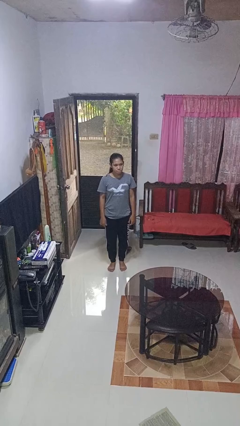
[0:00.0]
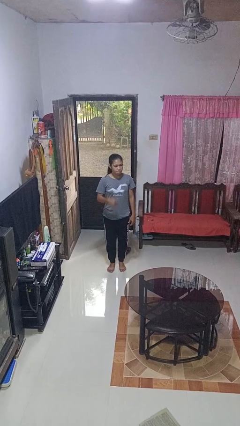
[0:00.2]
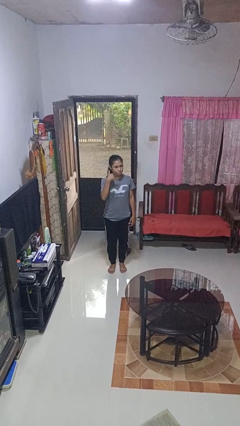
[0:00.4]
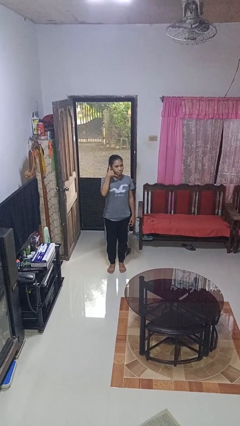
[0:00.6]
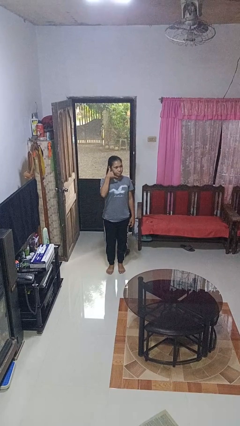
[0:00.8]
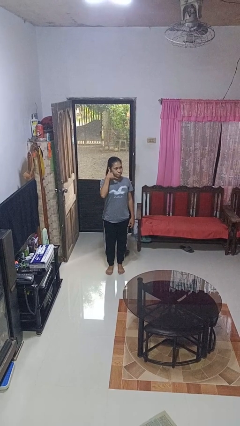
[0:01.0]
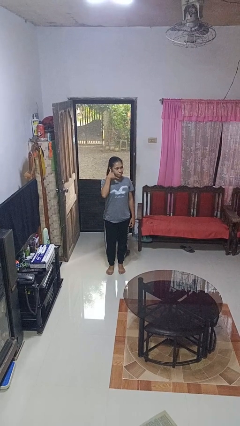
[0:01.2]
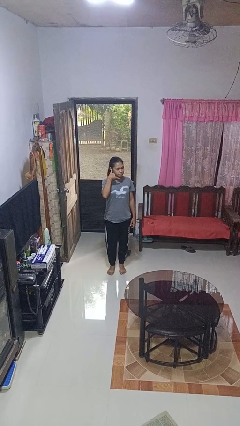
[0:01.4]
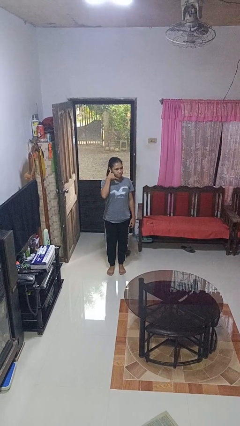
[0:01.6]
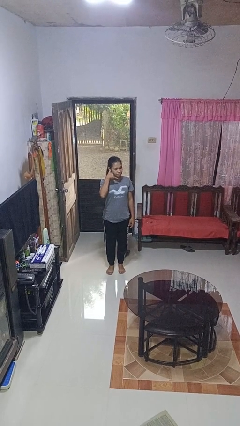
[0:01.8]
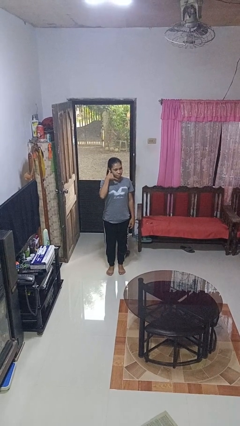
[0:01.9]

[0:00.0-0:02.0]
person gestures call me

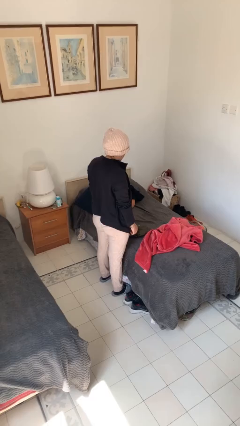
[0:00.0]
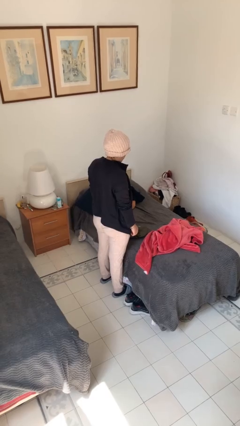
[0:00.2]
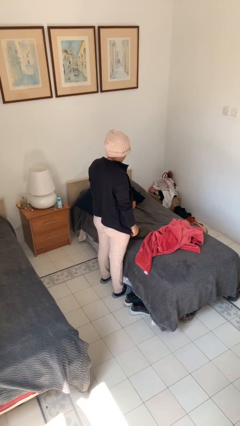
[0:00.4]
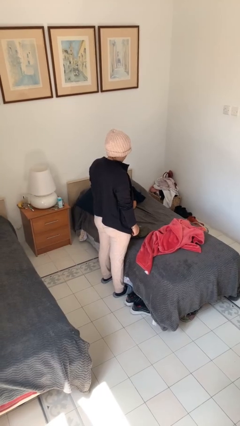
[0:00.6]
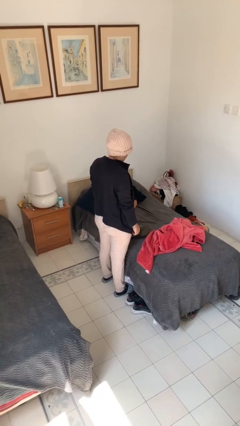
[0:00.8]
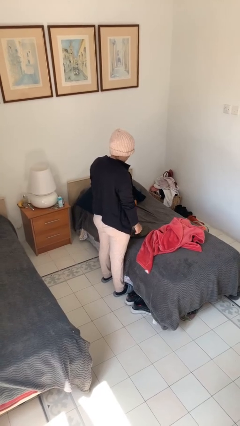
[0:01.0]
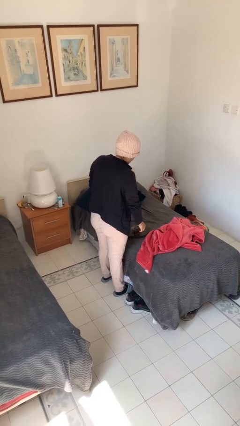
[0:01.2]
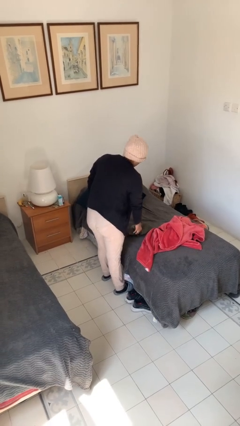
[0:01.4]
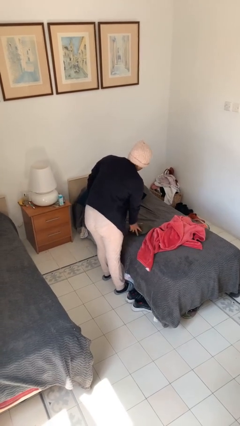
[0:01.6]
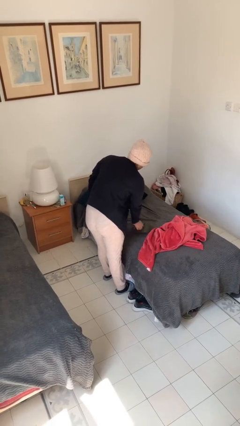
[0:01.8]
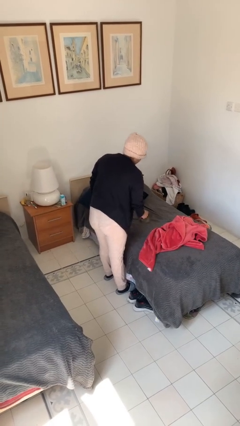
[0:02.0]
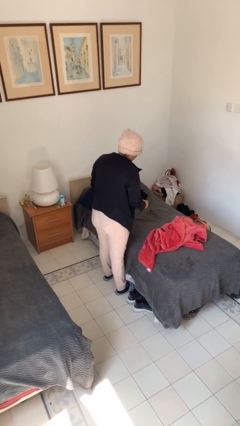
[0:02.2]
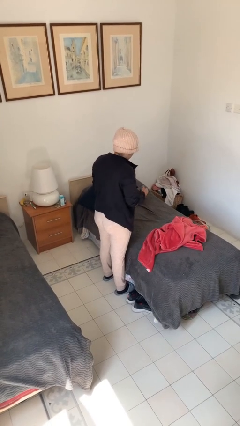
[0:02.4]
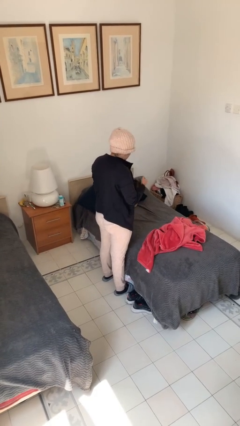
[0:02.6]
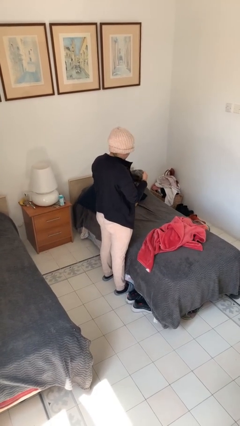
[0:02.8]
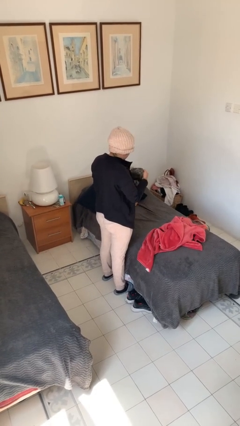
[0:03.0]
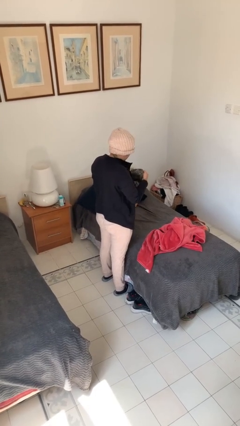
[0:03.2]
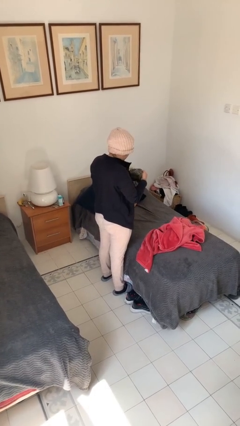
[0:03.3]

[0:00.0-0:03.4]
person picks up object from couch

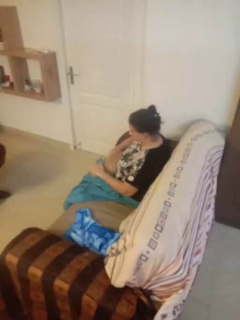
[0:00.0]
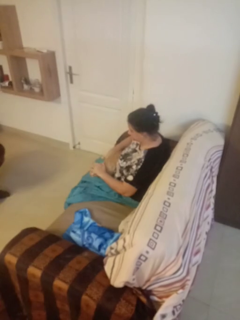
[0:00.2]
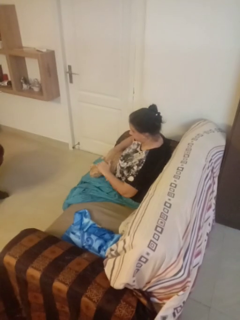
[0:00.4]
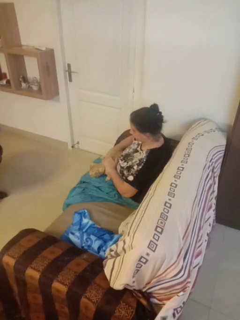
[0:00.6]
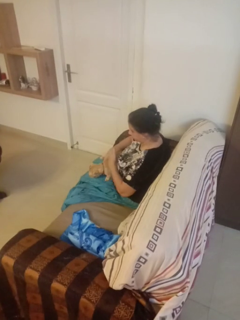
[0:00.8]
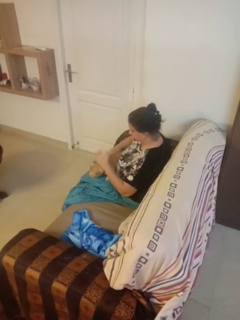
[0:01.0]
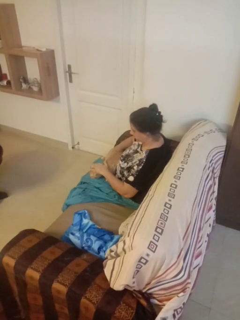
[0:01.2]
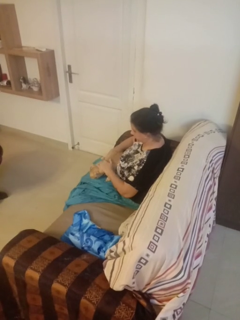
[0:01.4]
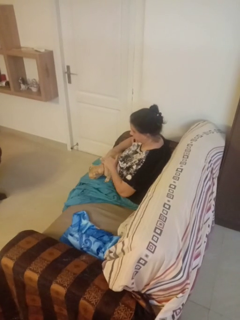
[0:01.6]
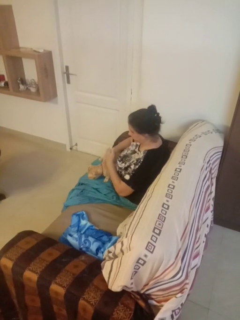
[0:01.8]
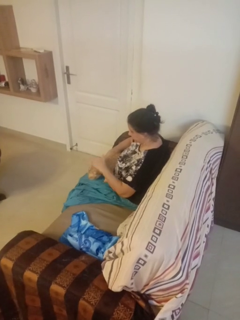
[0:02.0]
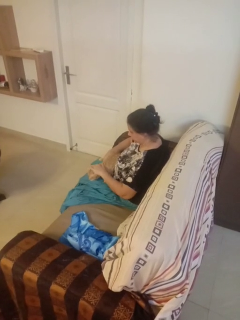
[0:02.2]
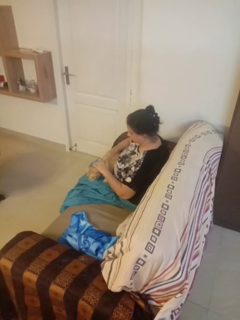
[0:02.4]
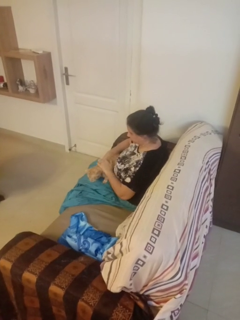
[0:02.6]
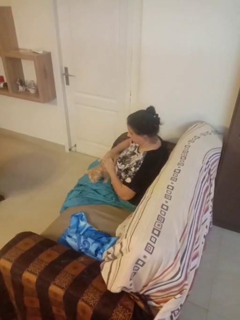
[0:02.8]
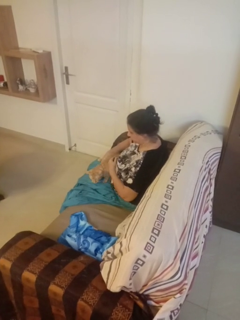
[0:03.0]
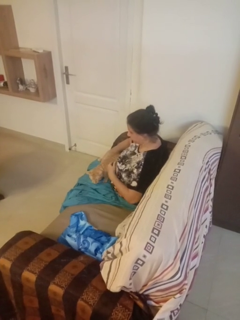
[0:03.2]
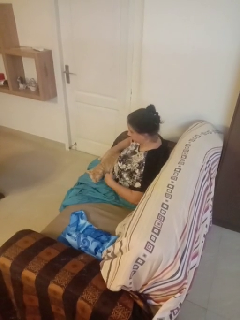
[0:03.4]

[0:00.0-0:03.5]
person pets cat

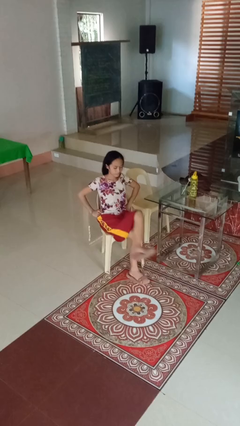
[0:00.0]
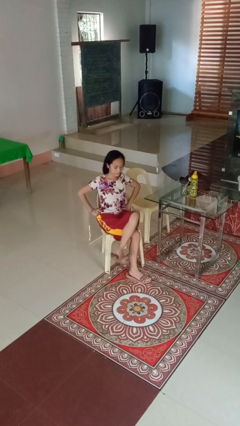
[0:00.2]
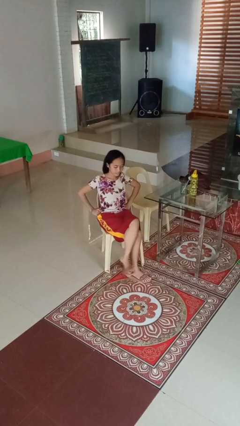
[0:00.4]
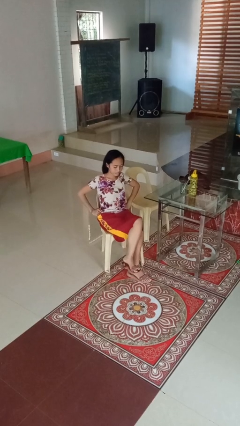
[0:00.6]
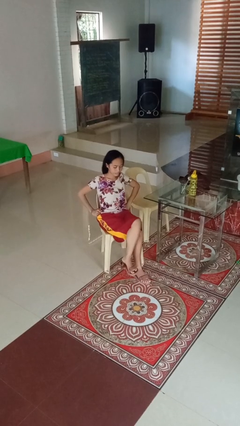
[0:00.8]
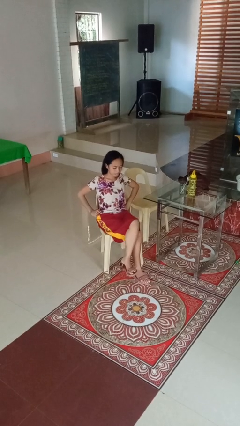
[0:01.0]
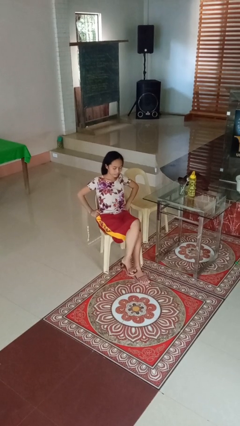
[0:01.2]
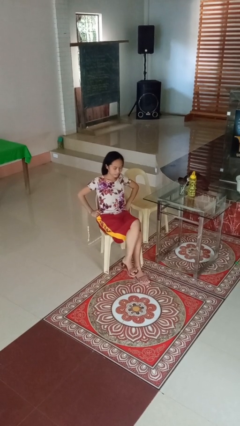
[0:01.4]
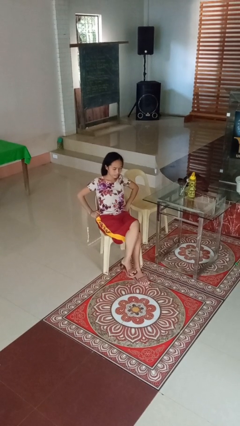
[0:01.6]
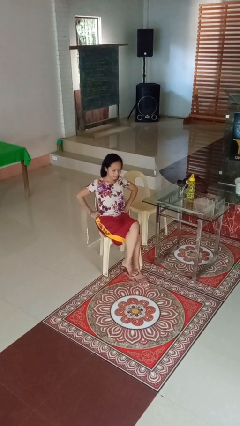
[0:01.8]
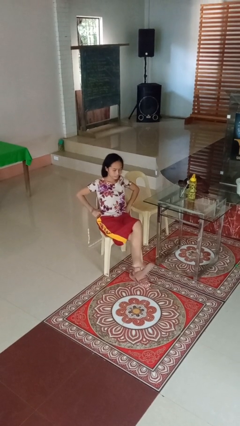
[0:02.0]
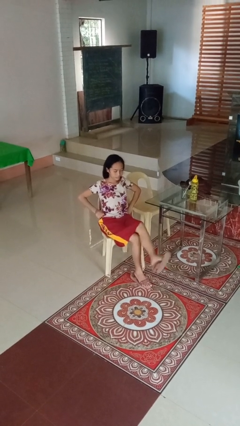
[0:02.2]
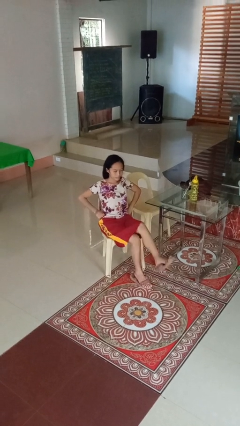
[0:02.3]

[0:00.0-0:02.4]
person crosses legs

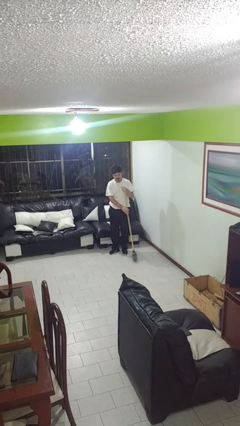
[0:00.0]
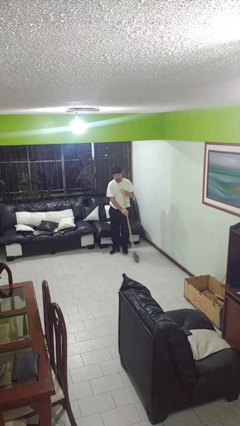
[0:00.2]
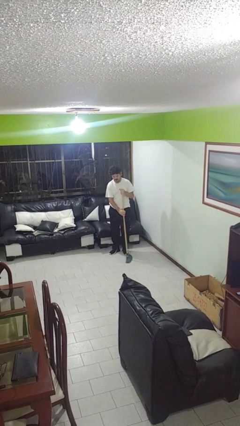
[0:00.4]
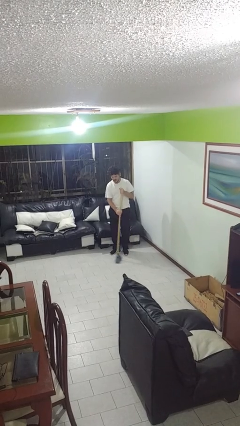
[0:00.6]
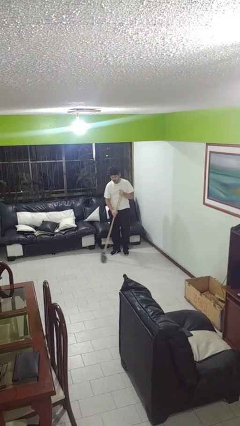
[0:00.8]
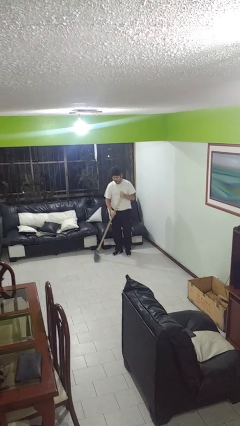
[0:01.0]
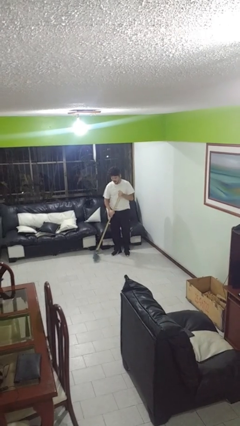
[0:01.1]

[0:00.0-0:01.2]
person sweeps floor

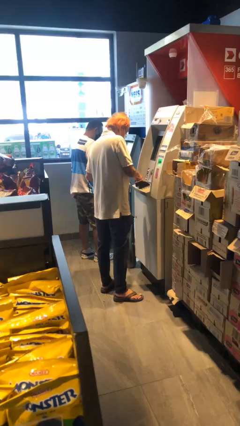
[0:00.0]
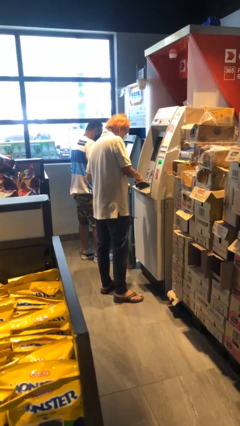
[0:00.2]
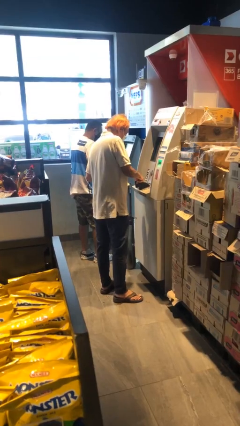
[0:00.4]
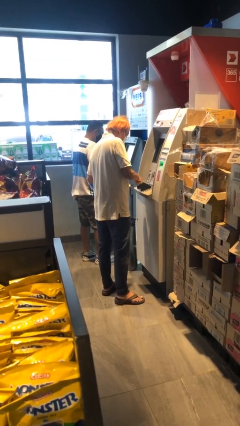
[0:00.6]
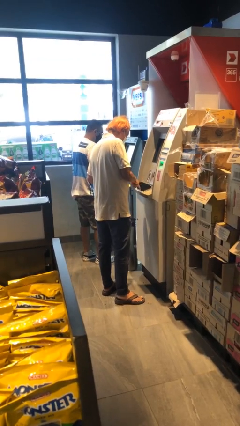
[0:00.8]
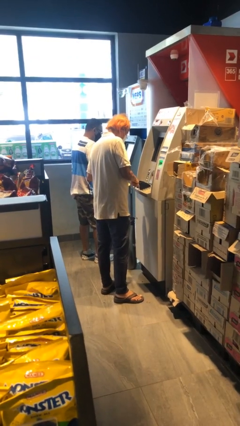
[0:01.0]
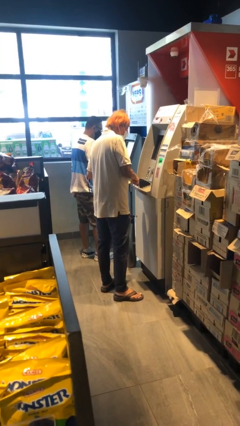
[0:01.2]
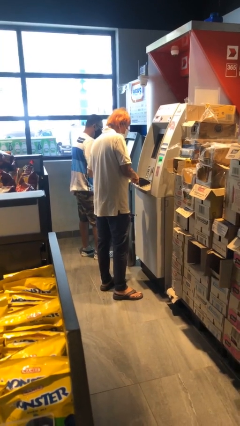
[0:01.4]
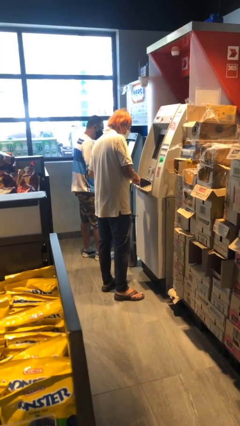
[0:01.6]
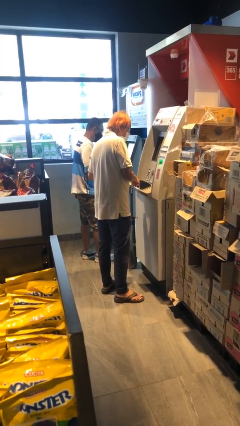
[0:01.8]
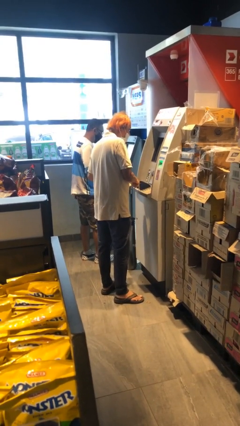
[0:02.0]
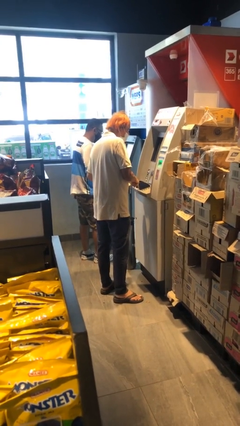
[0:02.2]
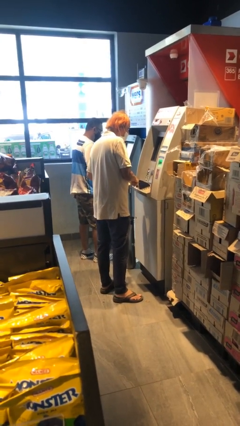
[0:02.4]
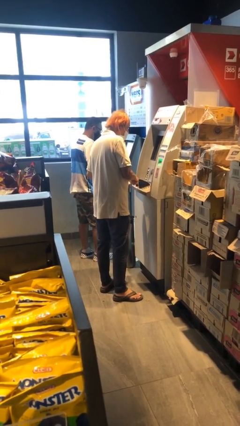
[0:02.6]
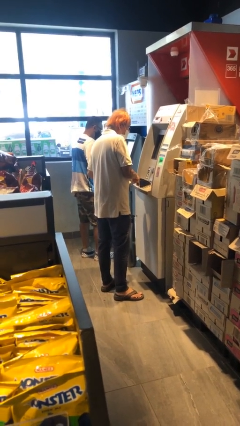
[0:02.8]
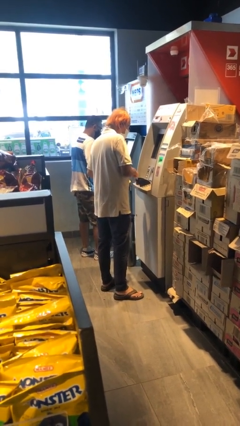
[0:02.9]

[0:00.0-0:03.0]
person purchases from machine

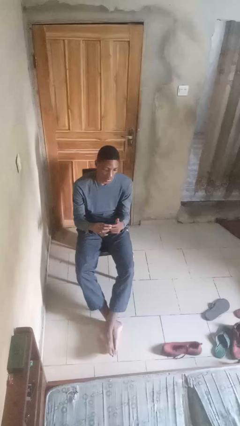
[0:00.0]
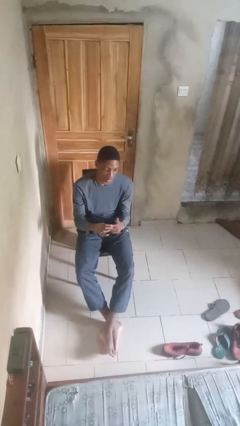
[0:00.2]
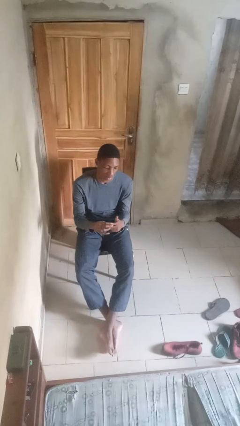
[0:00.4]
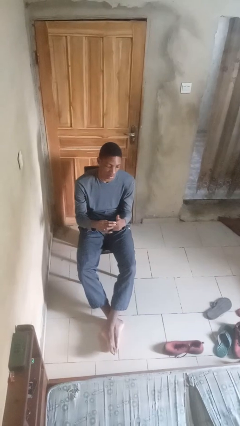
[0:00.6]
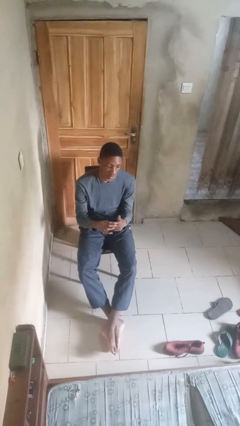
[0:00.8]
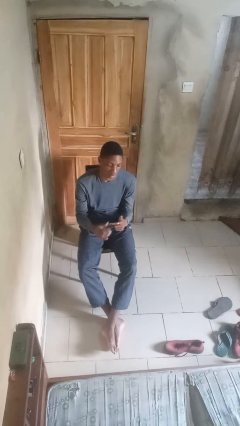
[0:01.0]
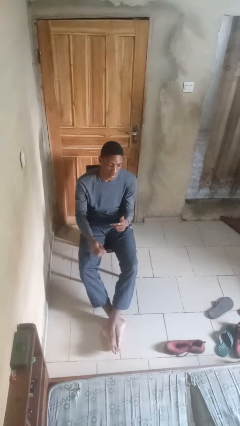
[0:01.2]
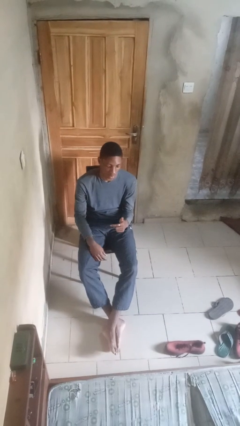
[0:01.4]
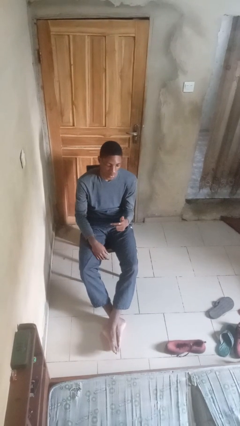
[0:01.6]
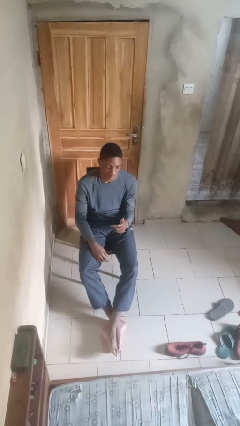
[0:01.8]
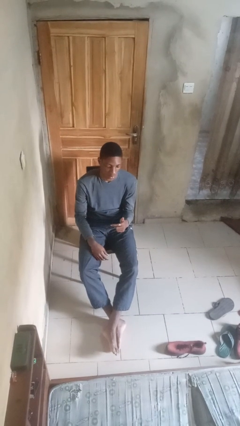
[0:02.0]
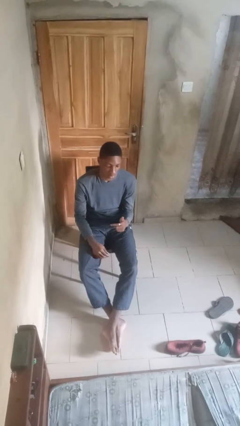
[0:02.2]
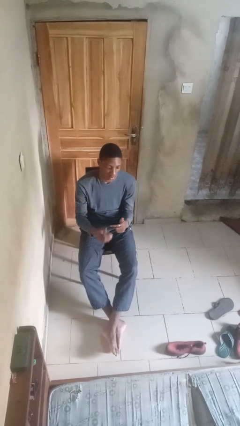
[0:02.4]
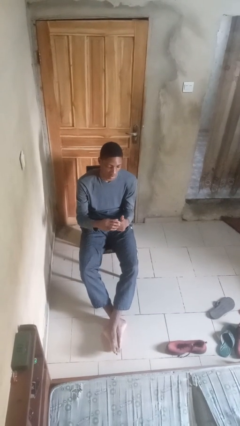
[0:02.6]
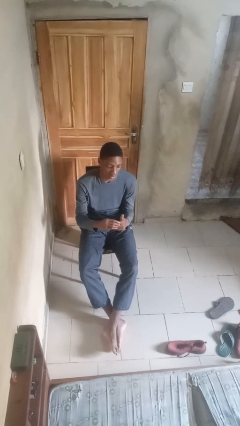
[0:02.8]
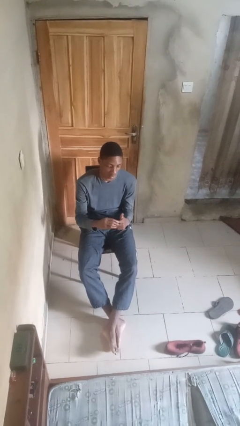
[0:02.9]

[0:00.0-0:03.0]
person puts on ring
